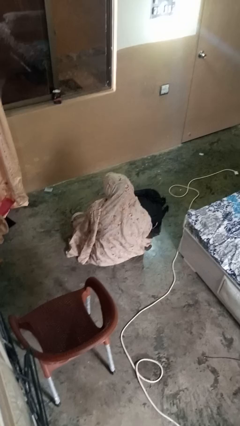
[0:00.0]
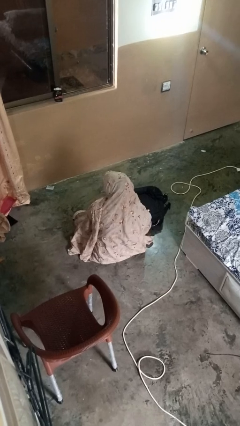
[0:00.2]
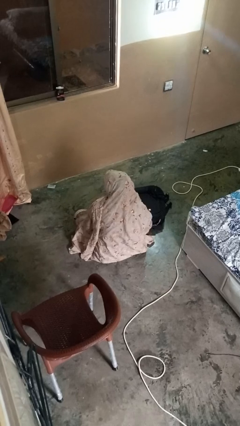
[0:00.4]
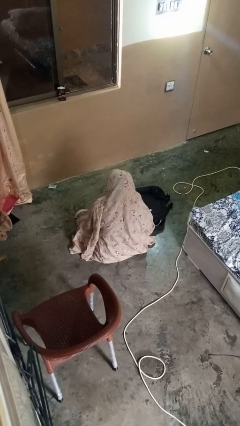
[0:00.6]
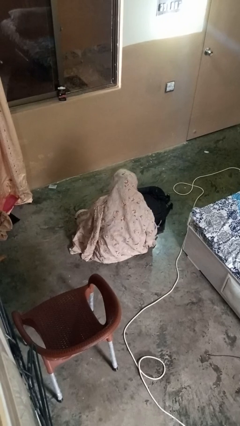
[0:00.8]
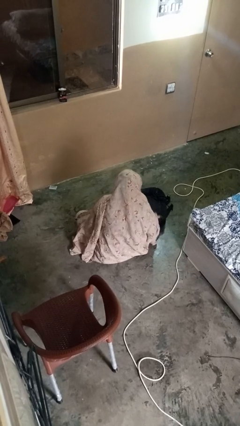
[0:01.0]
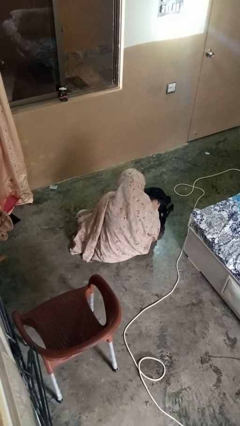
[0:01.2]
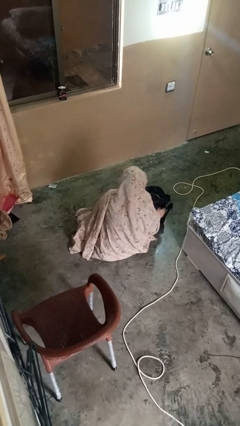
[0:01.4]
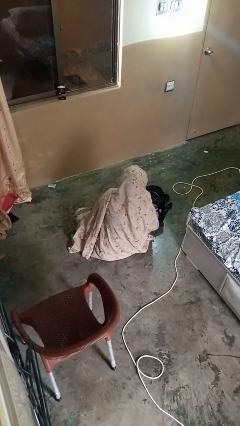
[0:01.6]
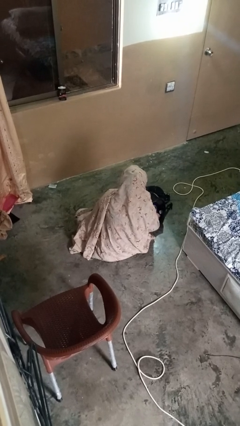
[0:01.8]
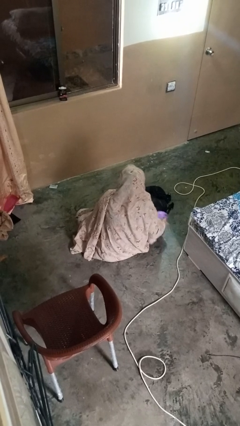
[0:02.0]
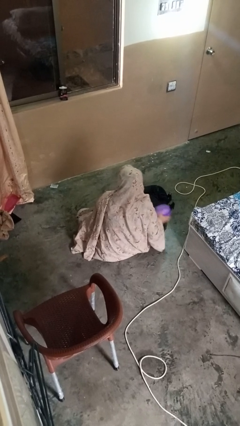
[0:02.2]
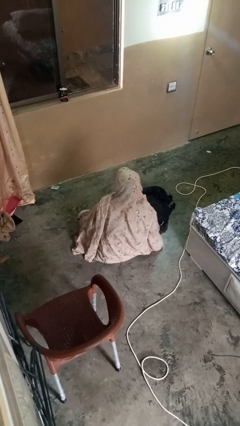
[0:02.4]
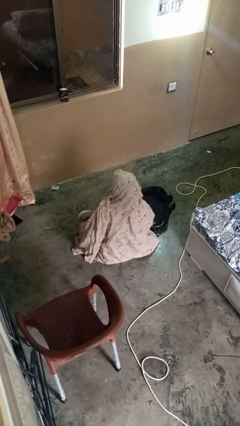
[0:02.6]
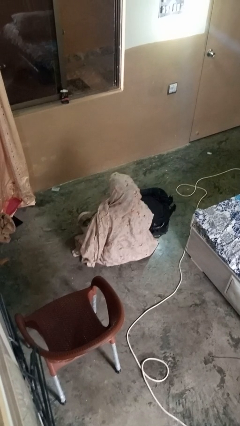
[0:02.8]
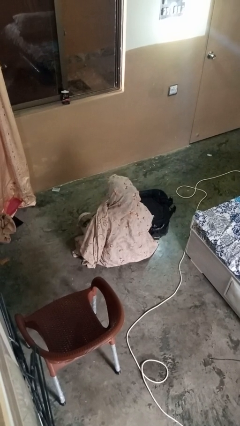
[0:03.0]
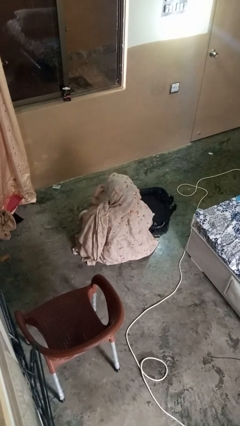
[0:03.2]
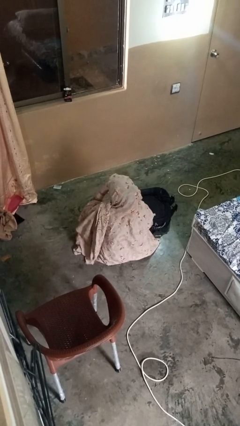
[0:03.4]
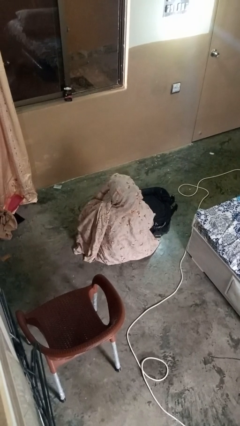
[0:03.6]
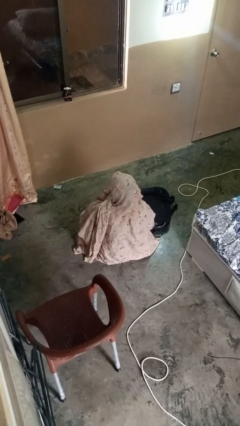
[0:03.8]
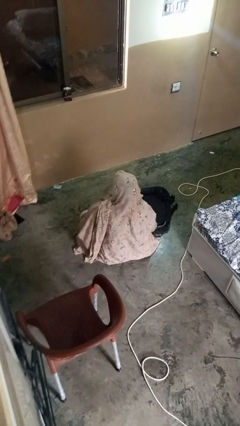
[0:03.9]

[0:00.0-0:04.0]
person eats snack from bag

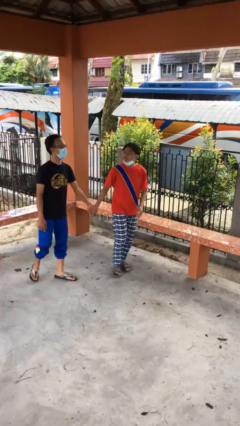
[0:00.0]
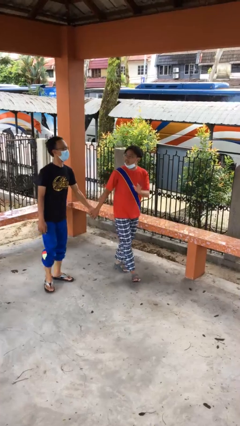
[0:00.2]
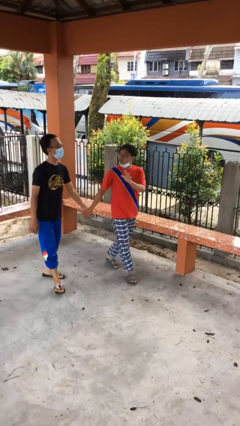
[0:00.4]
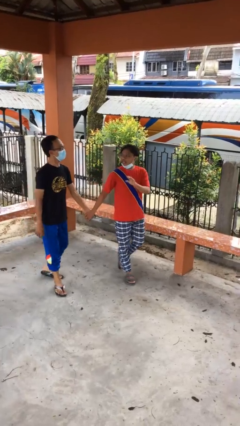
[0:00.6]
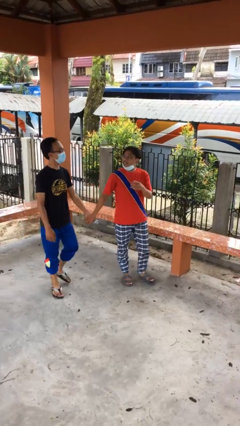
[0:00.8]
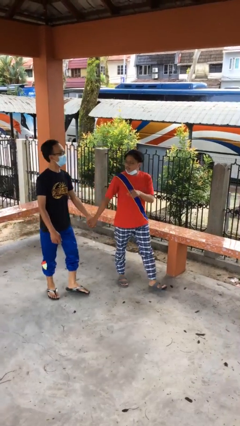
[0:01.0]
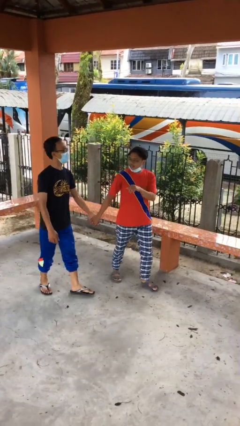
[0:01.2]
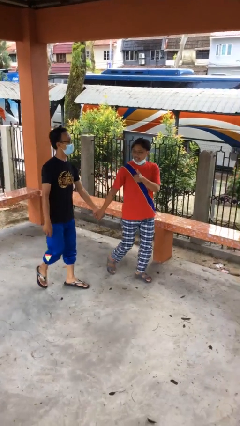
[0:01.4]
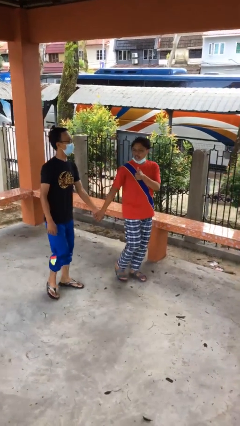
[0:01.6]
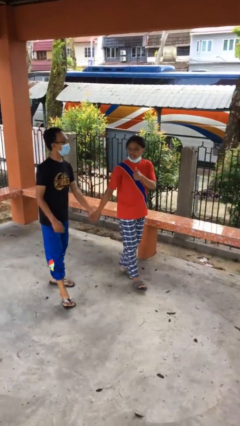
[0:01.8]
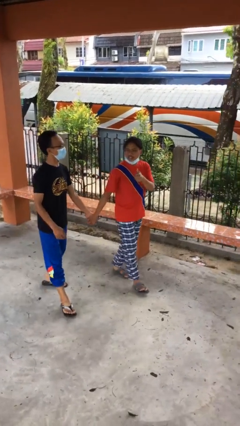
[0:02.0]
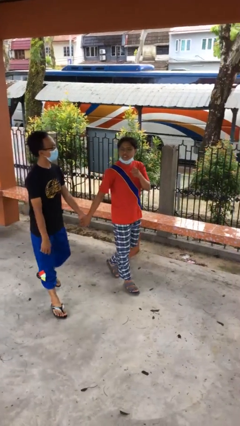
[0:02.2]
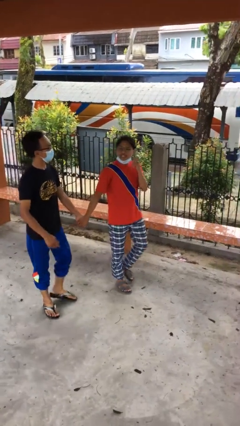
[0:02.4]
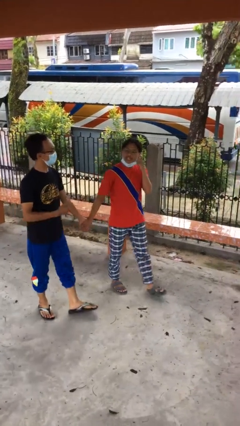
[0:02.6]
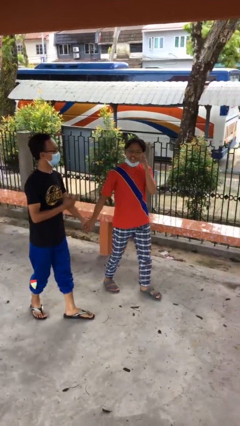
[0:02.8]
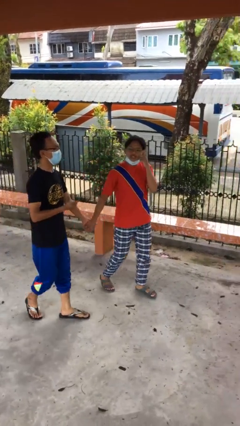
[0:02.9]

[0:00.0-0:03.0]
person holds hand

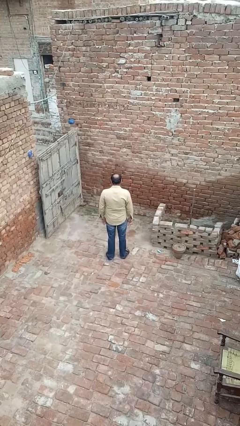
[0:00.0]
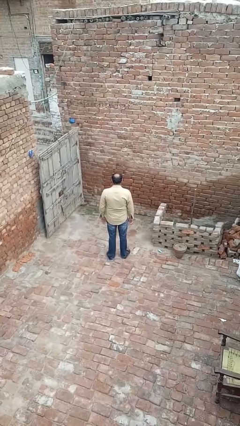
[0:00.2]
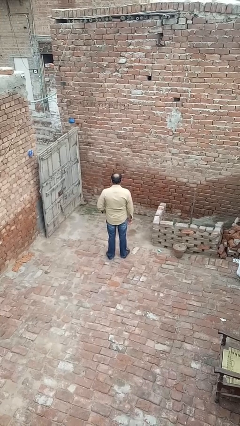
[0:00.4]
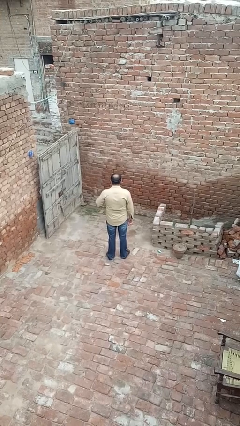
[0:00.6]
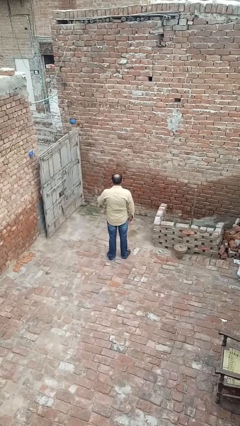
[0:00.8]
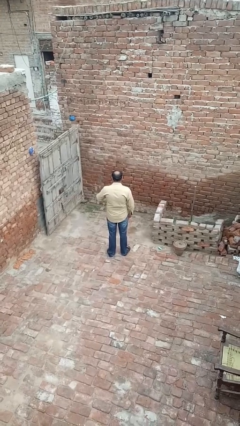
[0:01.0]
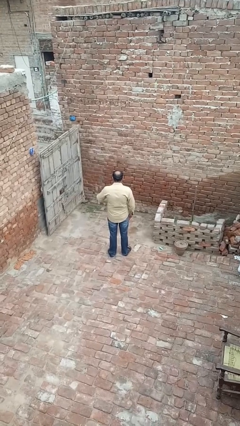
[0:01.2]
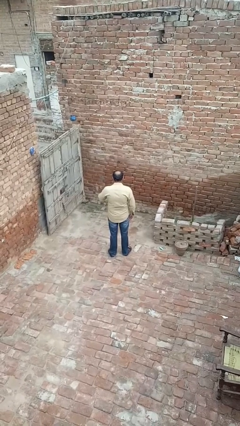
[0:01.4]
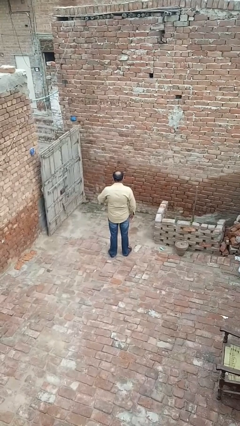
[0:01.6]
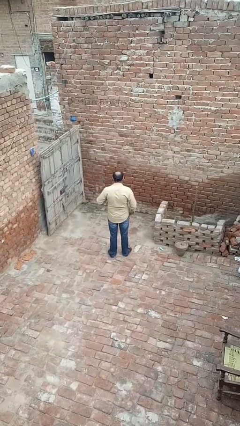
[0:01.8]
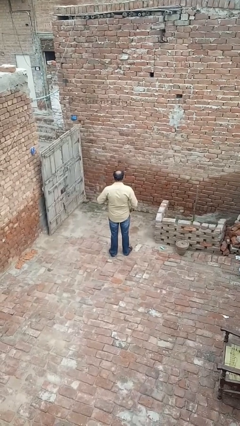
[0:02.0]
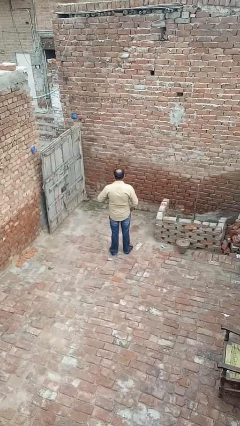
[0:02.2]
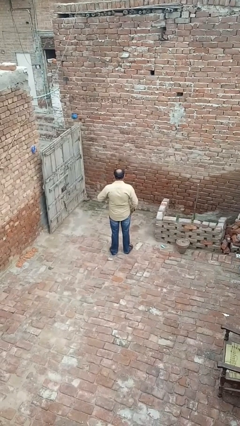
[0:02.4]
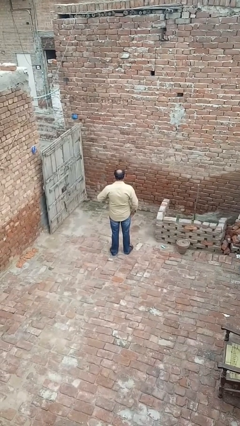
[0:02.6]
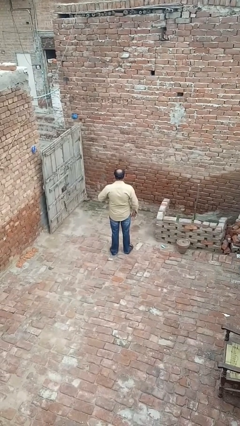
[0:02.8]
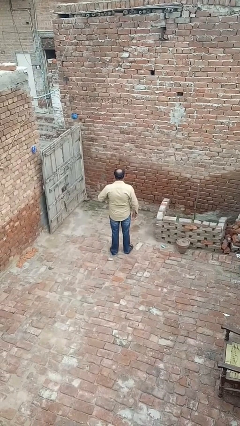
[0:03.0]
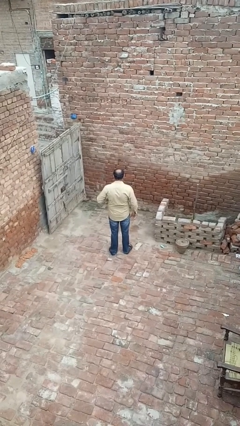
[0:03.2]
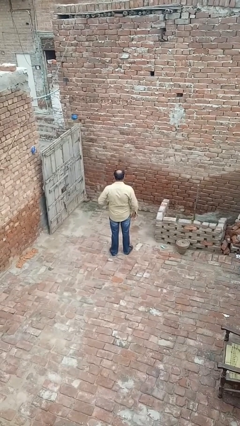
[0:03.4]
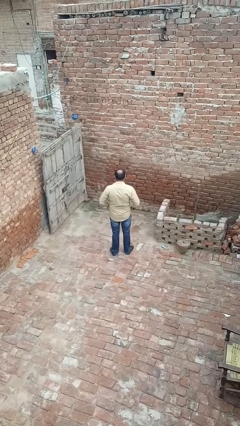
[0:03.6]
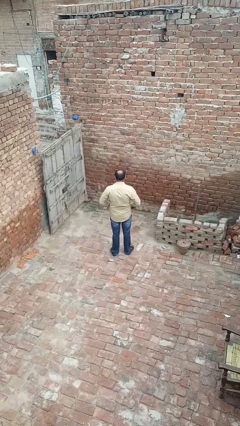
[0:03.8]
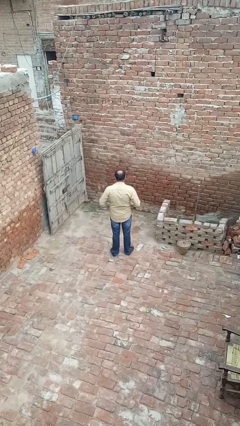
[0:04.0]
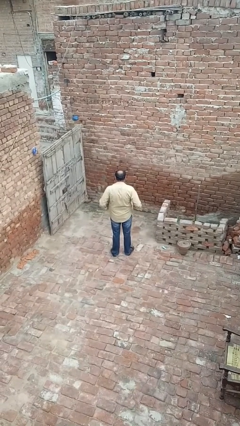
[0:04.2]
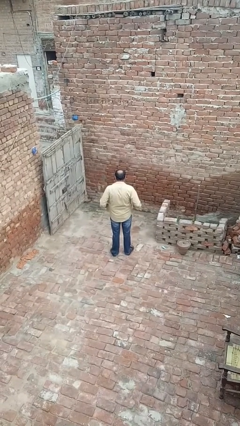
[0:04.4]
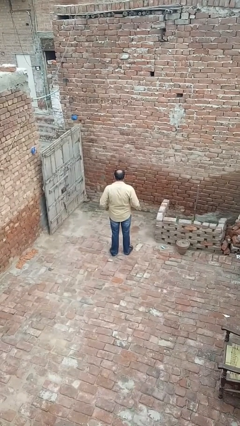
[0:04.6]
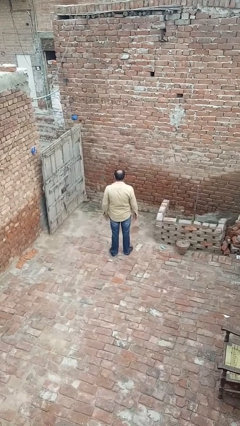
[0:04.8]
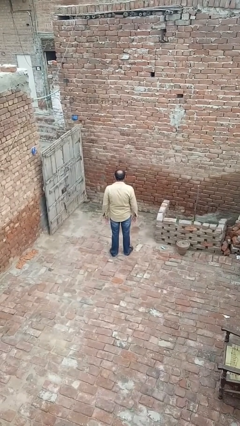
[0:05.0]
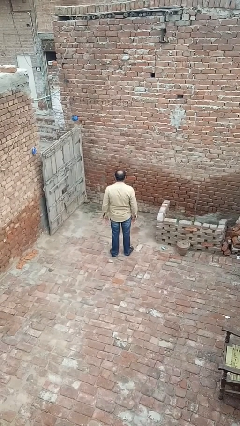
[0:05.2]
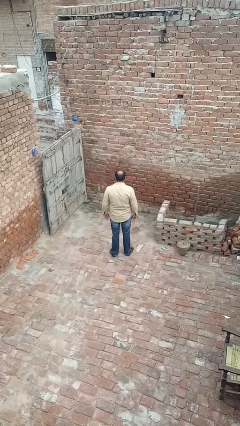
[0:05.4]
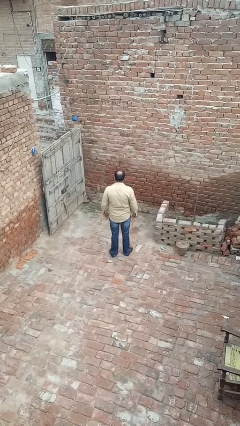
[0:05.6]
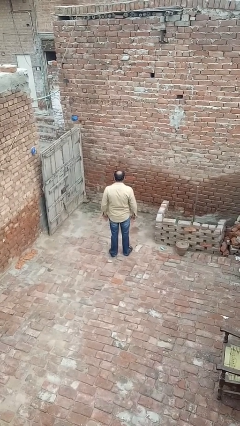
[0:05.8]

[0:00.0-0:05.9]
person unbuttons shirt

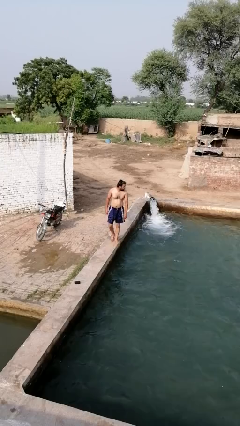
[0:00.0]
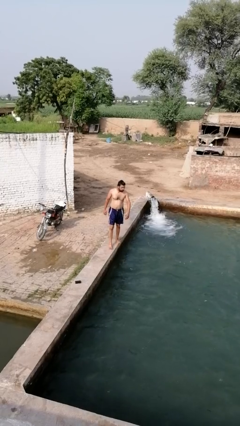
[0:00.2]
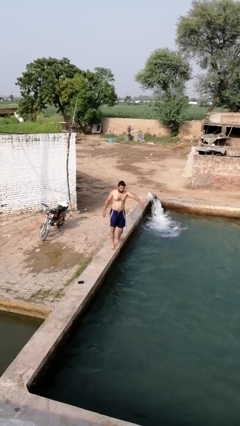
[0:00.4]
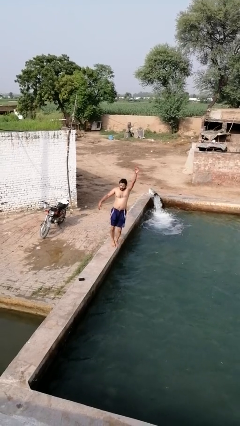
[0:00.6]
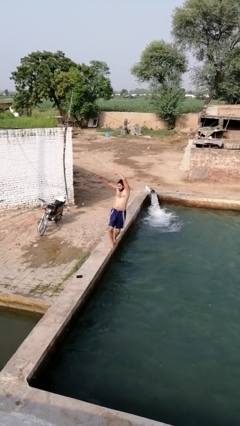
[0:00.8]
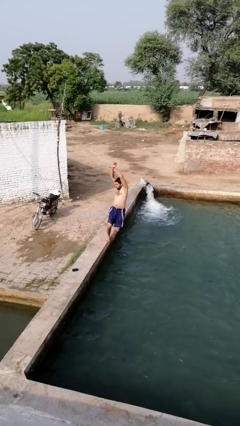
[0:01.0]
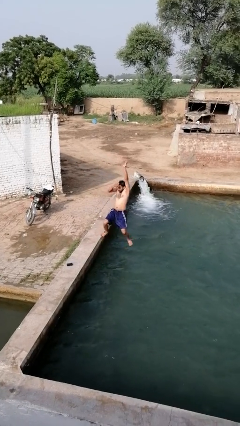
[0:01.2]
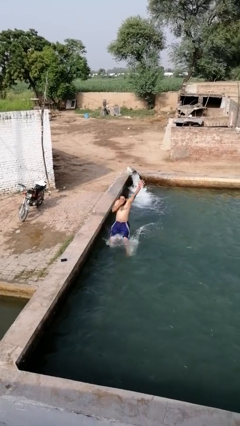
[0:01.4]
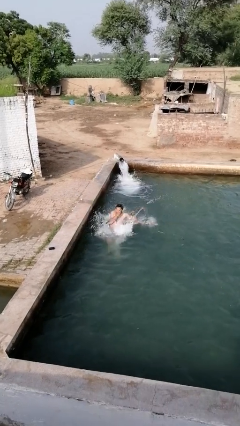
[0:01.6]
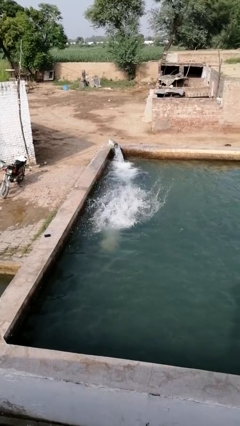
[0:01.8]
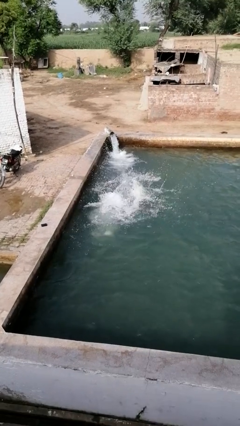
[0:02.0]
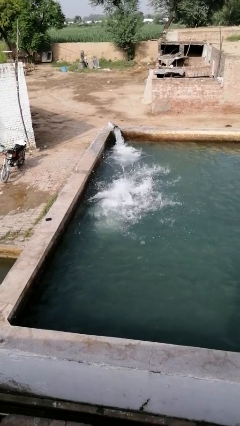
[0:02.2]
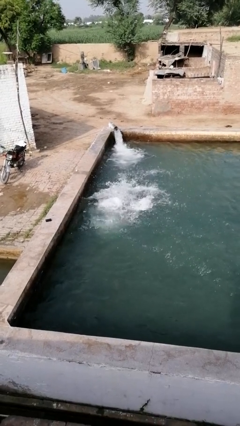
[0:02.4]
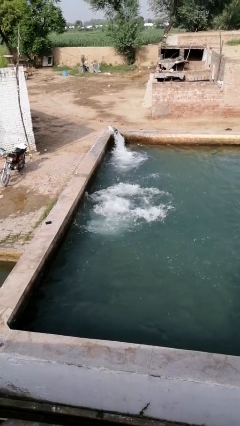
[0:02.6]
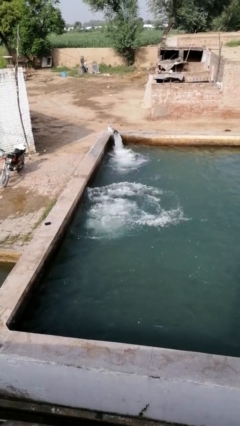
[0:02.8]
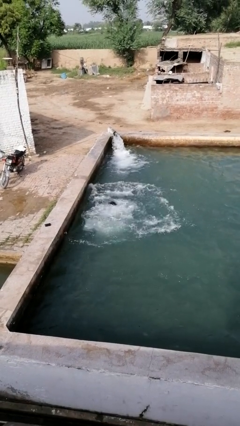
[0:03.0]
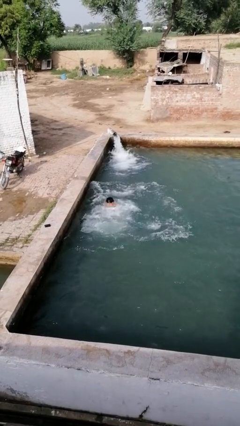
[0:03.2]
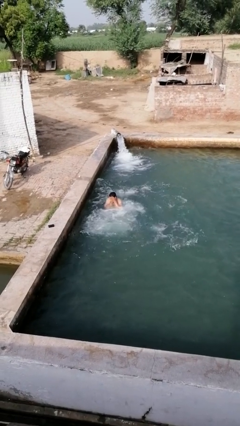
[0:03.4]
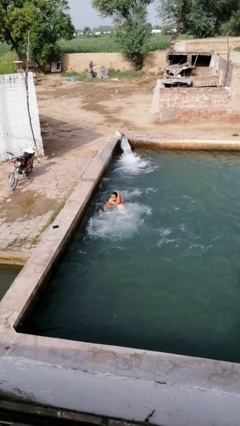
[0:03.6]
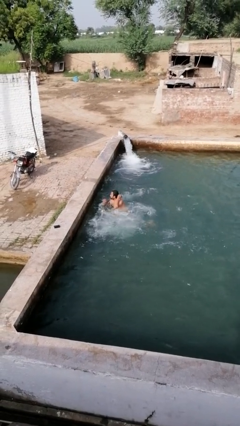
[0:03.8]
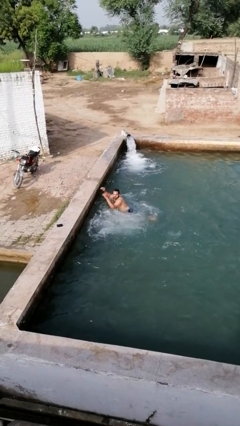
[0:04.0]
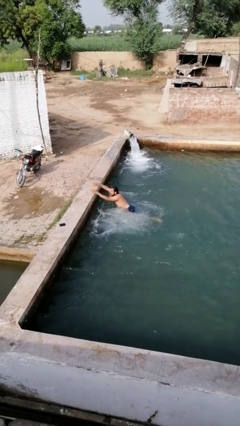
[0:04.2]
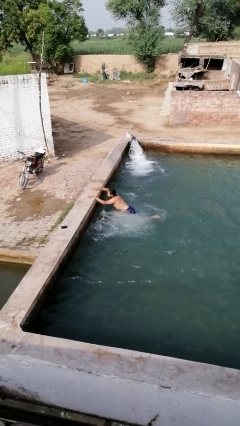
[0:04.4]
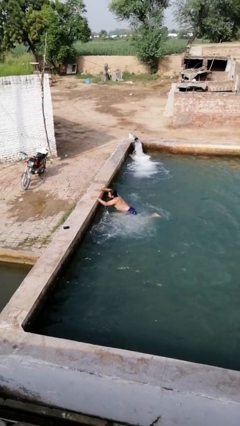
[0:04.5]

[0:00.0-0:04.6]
person falls into pool

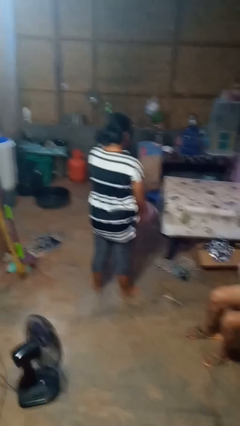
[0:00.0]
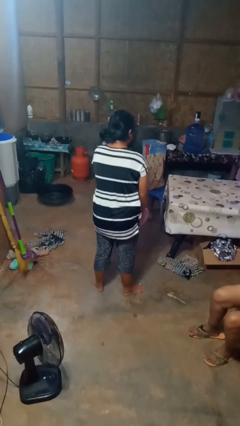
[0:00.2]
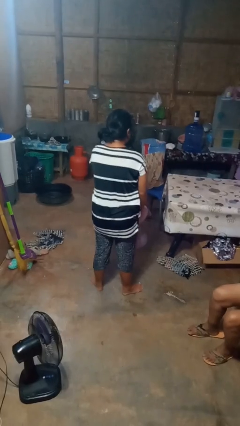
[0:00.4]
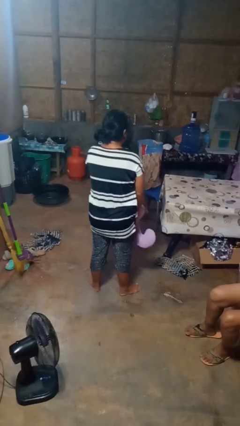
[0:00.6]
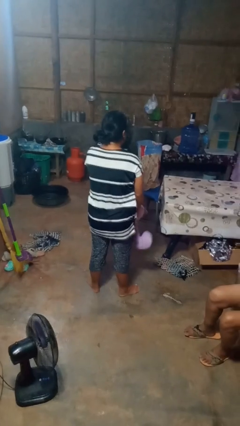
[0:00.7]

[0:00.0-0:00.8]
person catches dropped object
